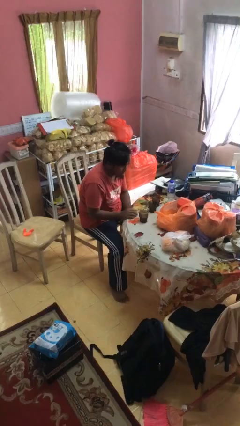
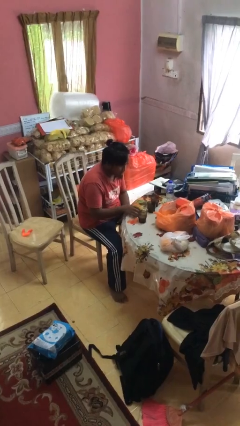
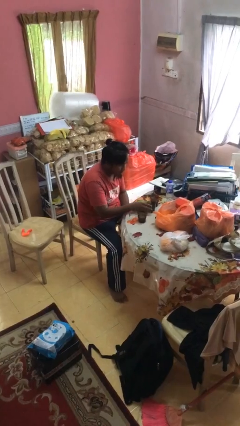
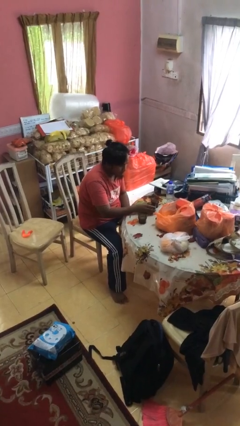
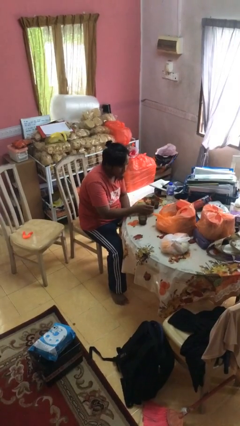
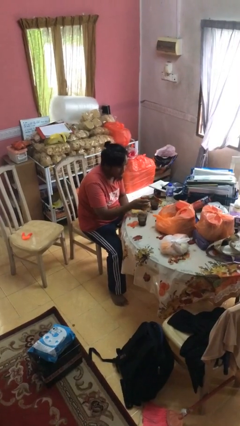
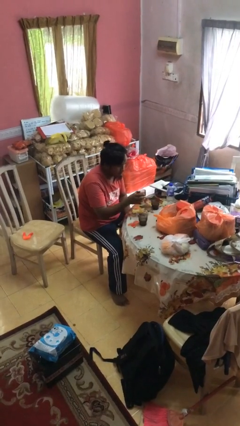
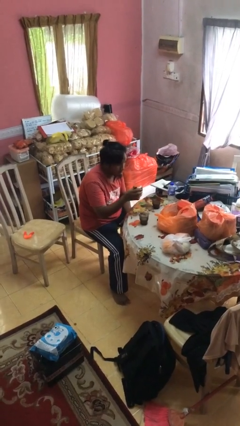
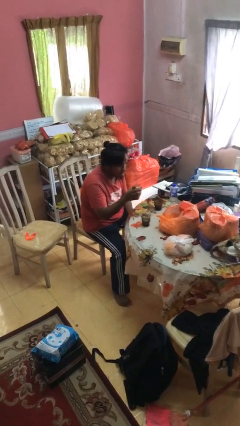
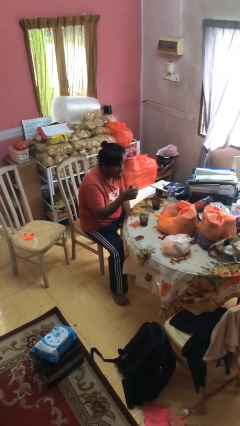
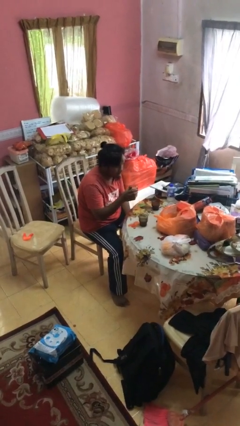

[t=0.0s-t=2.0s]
person picks up object from table

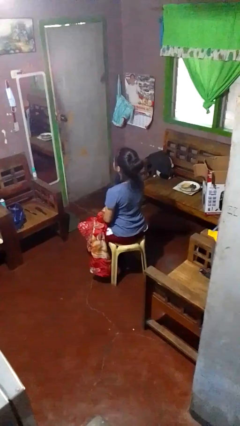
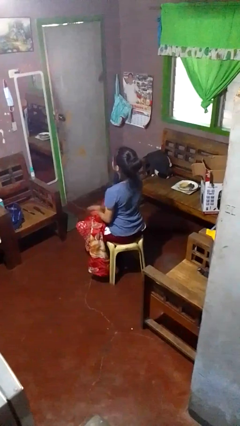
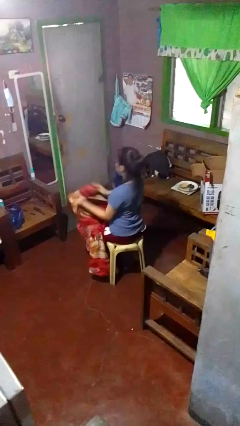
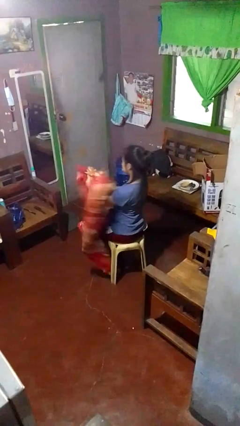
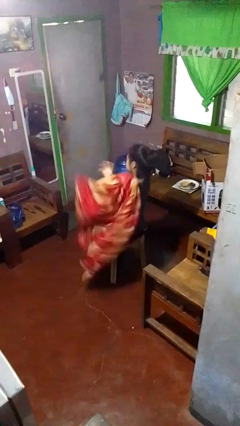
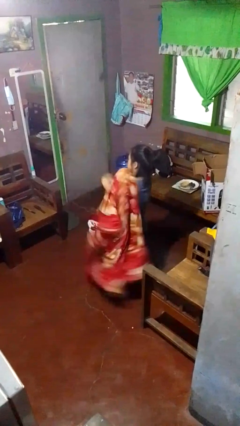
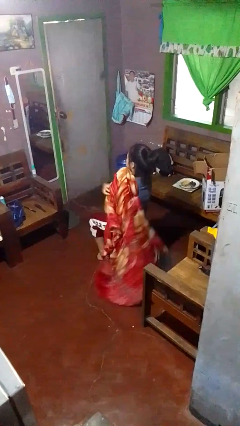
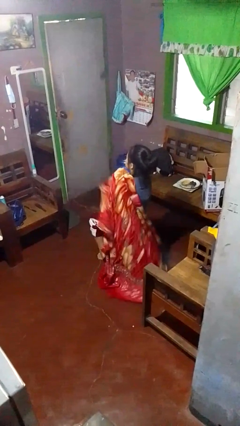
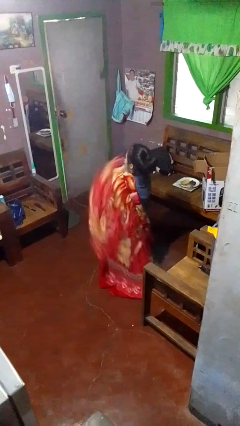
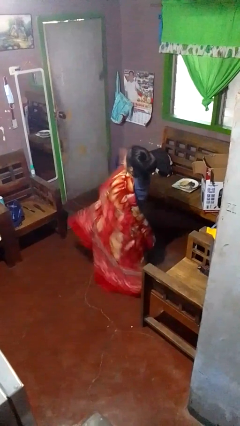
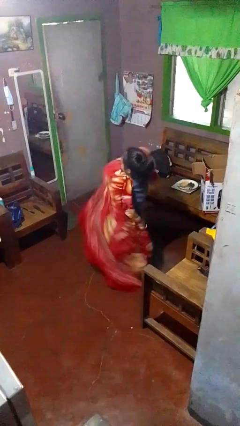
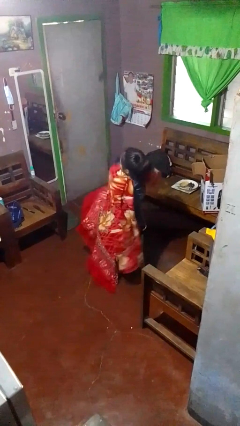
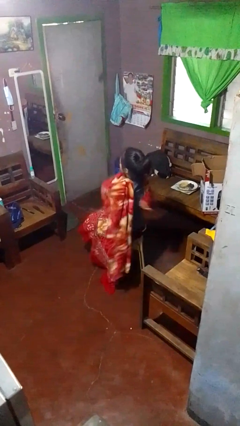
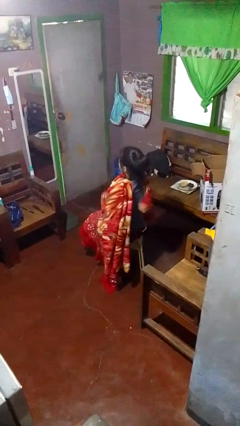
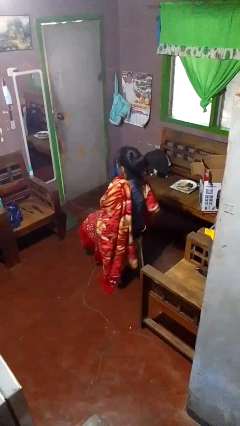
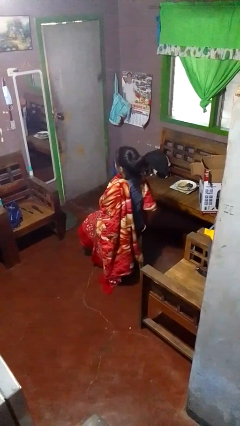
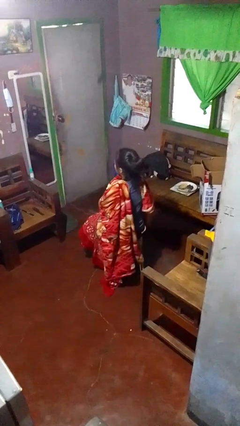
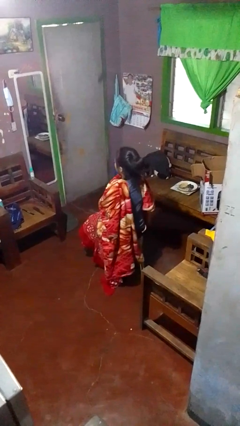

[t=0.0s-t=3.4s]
person covers with blanket

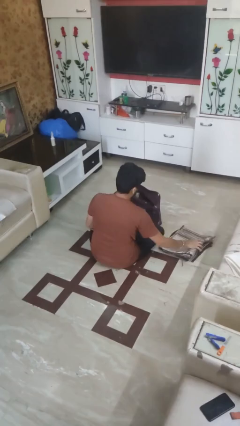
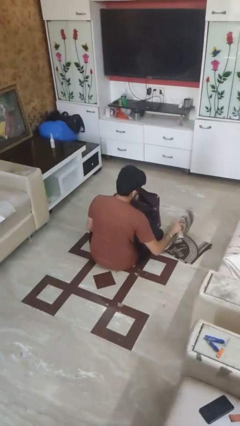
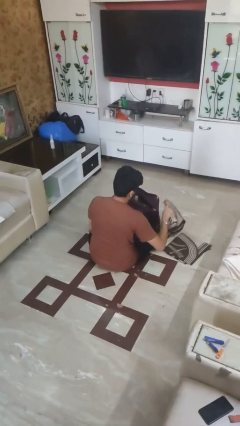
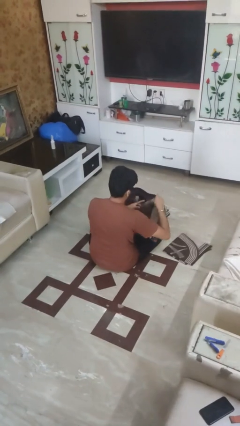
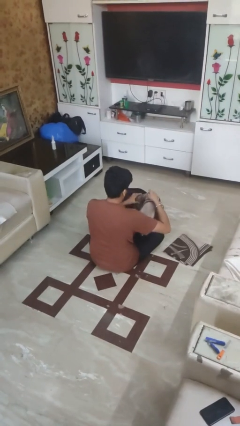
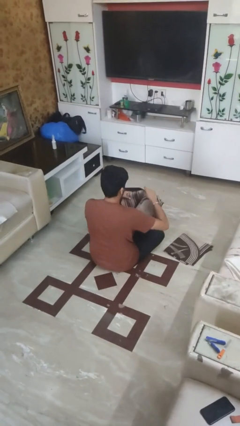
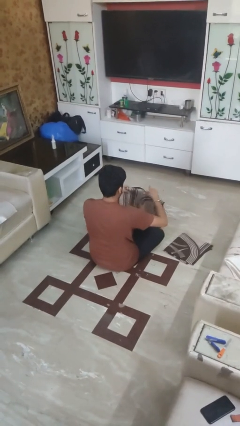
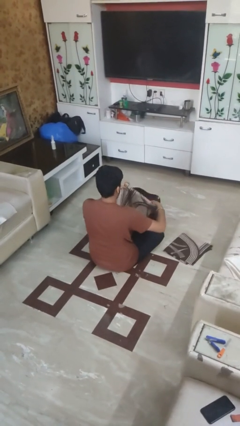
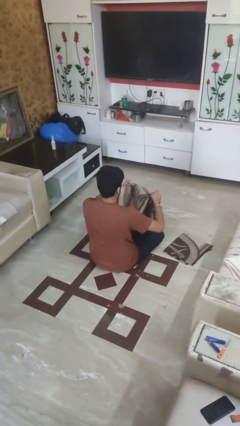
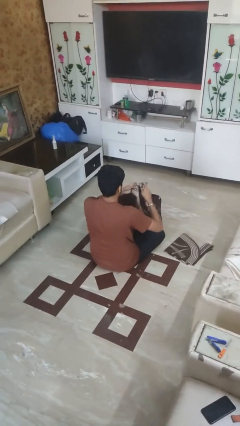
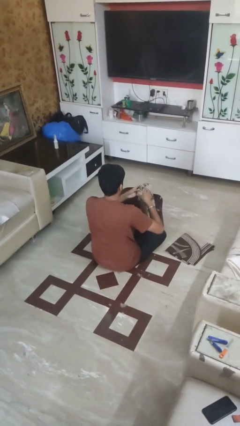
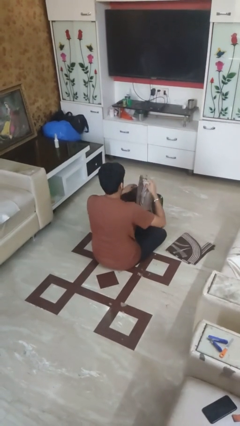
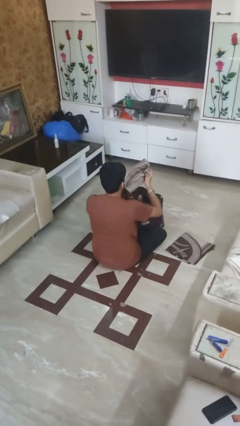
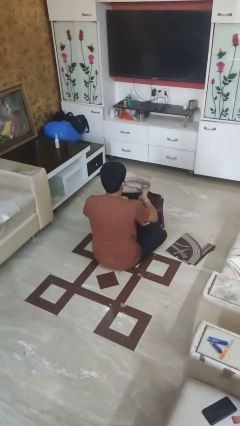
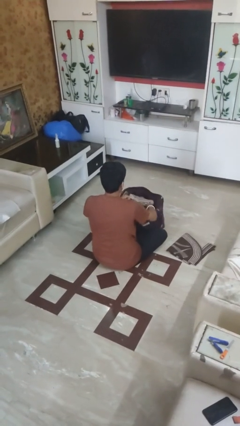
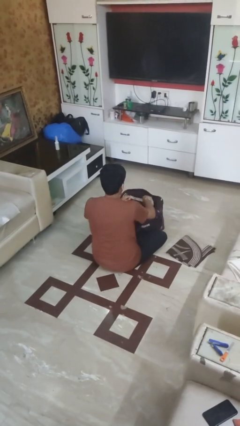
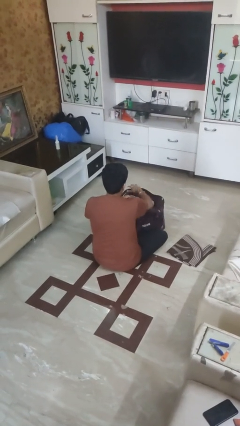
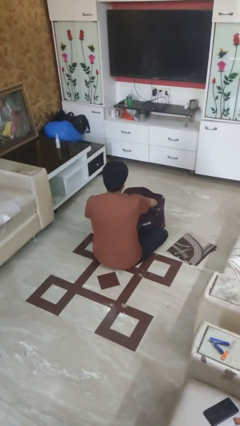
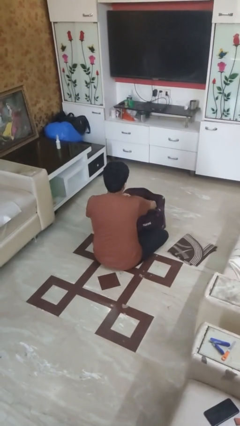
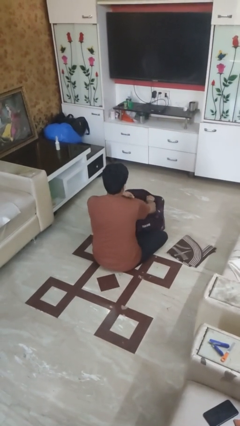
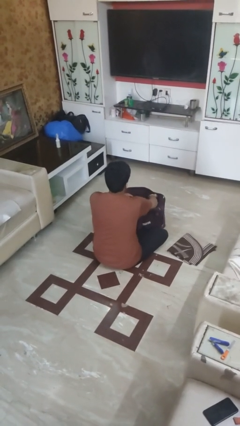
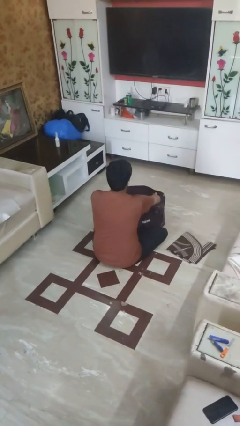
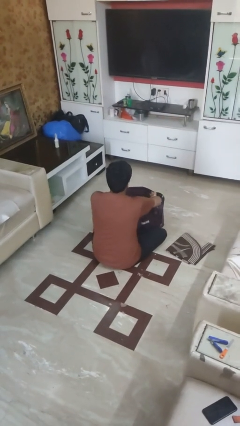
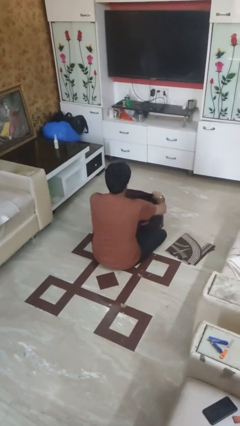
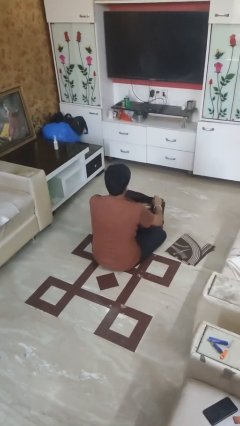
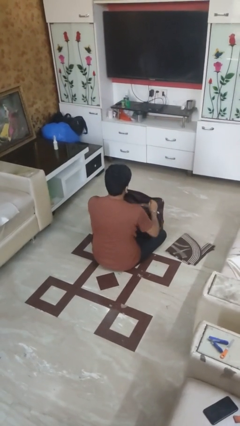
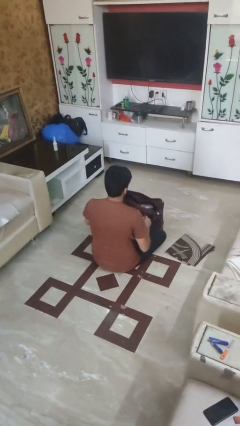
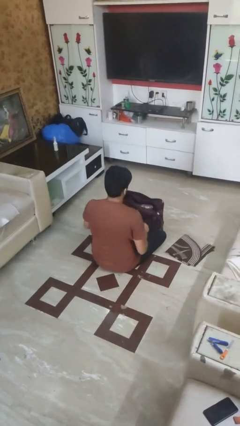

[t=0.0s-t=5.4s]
person loads clothes into suitcase

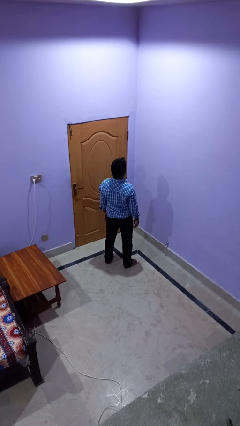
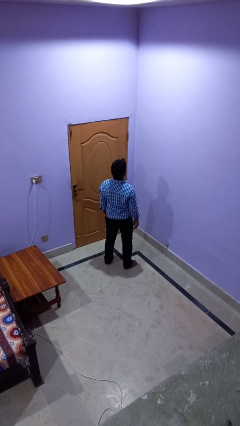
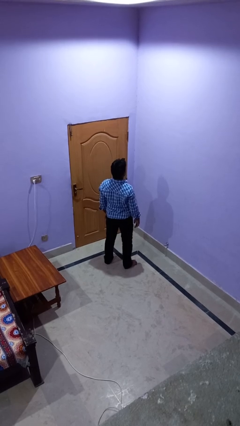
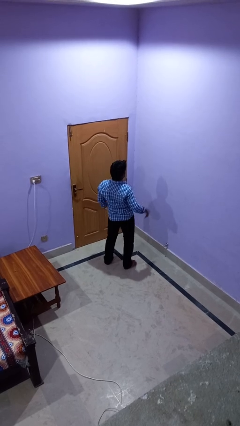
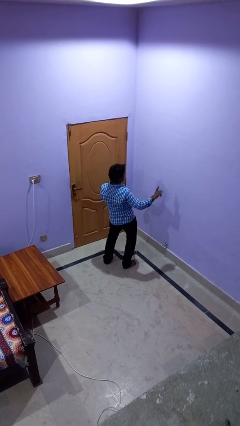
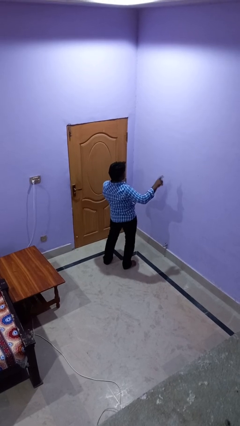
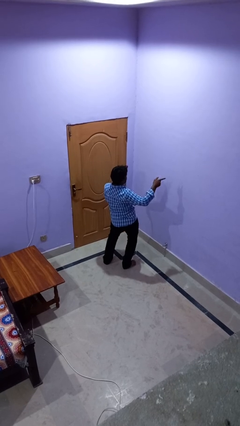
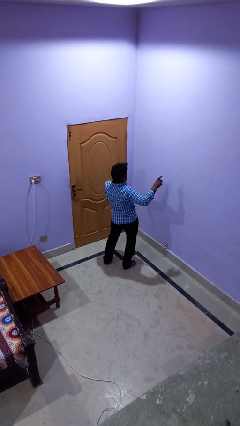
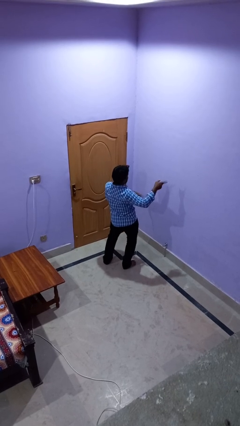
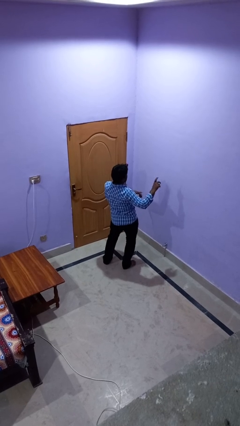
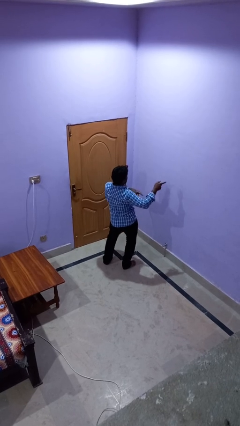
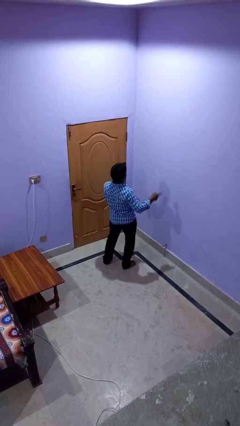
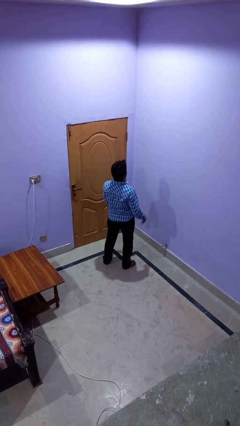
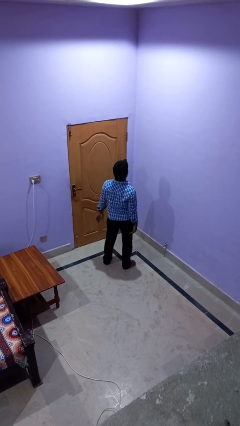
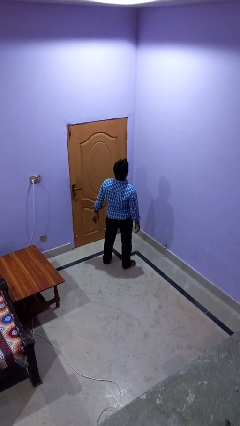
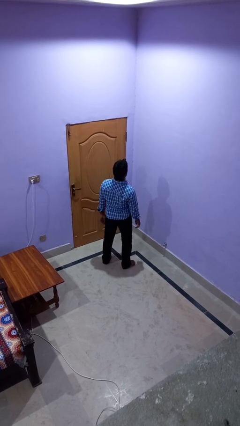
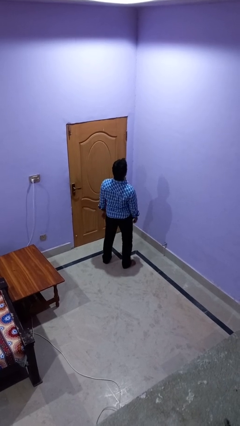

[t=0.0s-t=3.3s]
person dances in place

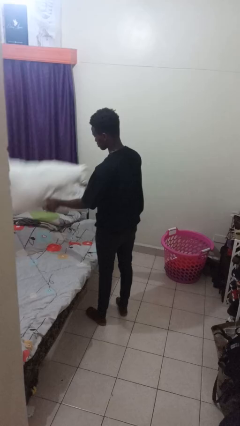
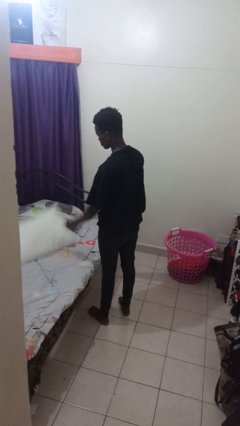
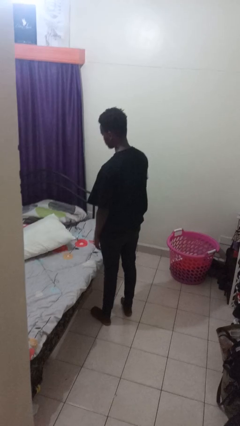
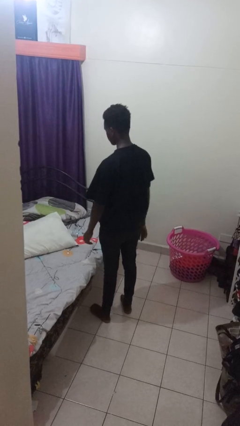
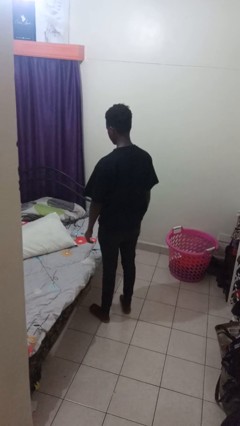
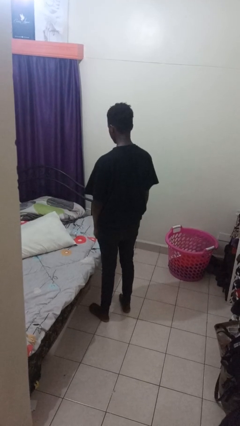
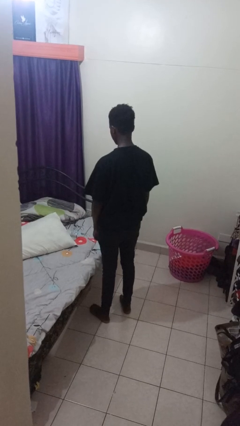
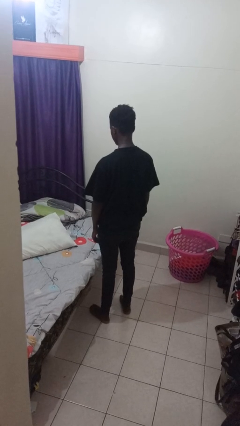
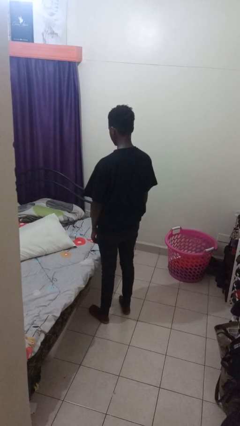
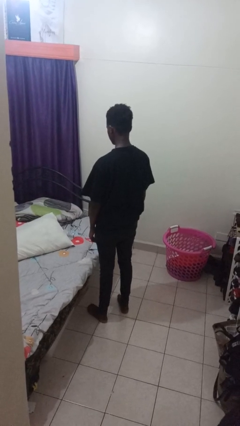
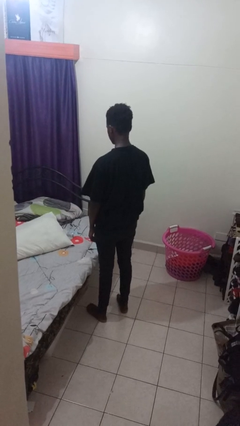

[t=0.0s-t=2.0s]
person puts down object on bed

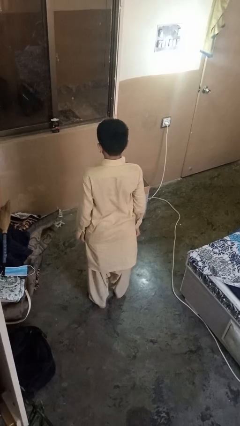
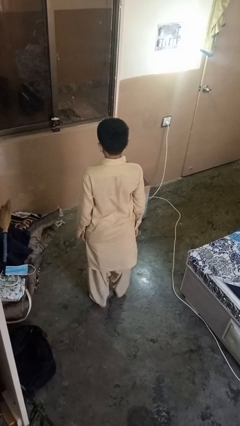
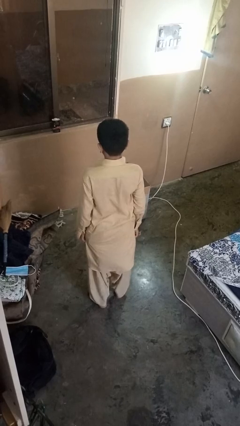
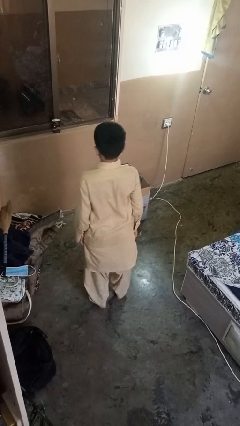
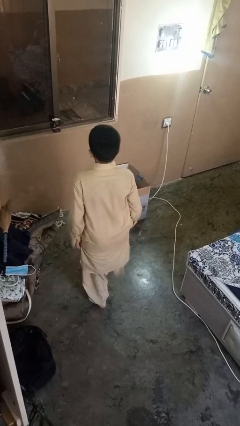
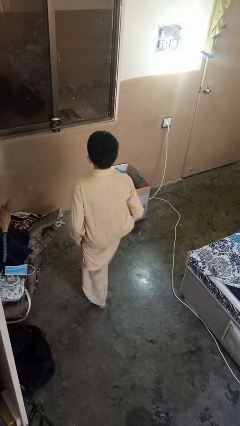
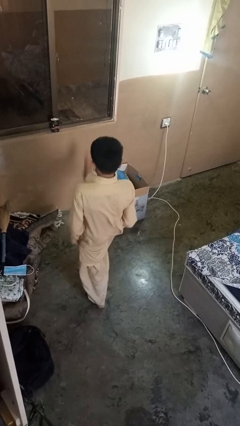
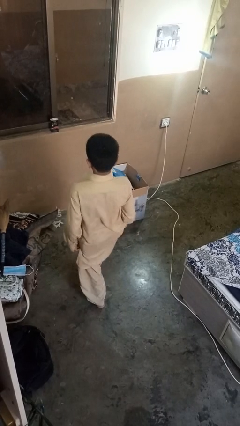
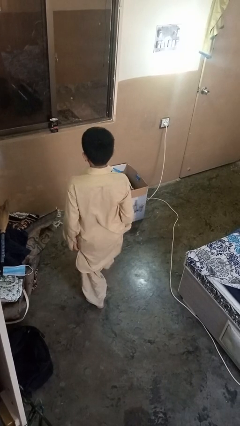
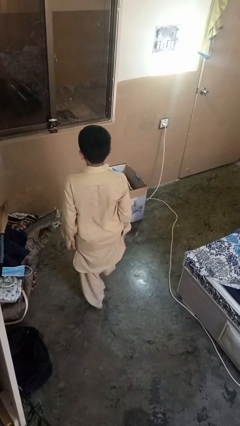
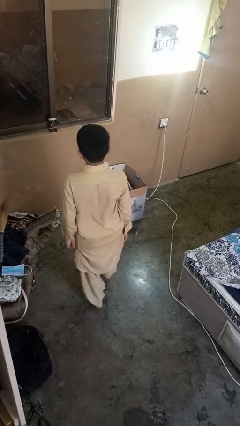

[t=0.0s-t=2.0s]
person karate kicks
